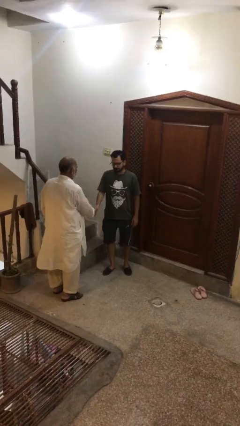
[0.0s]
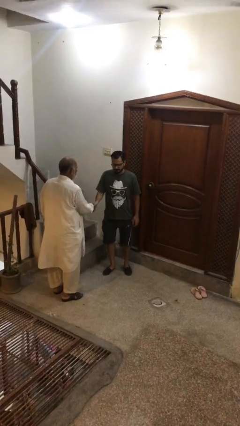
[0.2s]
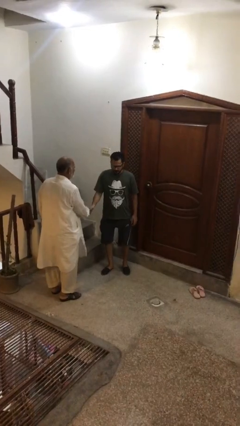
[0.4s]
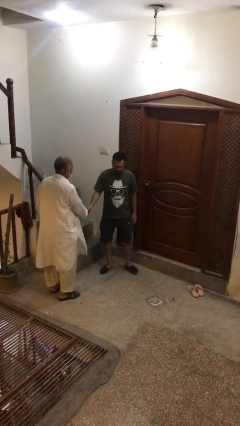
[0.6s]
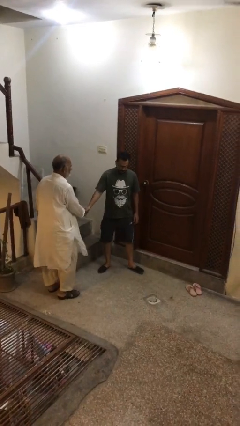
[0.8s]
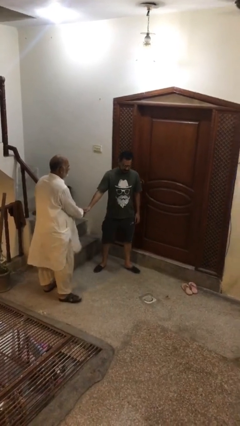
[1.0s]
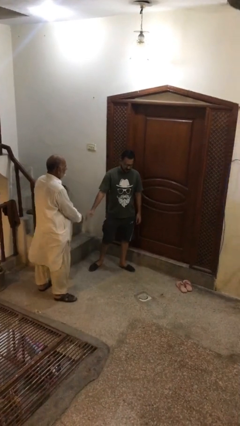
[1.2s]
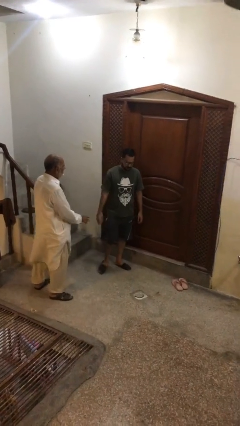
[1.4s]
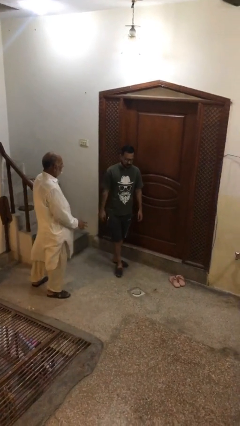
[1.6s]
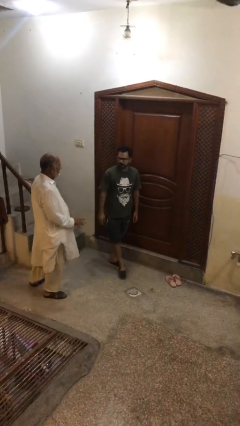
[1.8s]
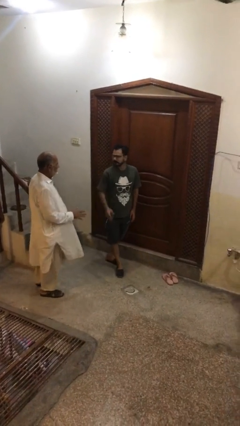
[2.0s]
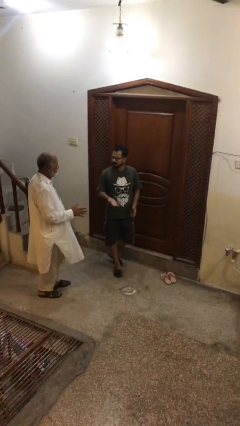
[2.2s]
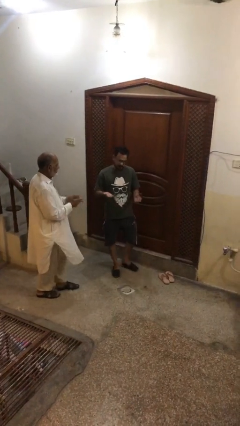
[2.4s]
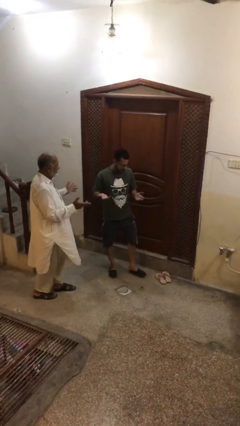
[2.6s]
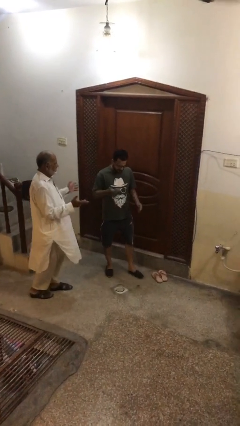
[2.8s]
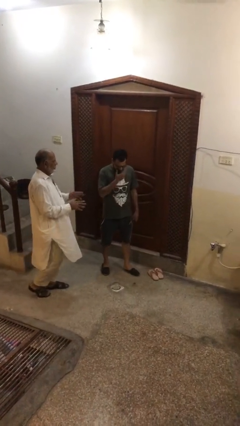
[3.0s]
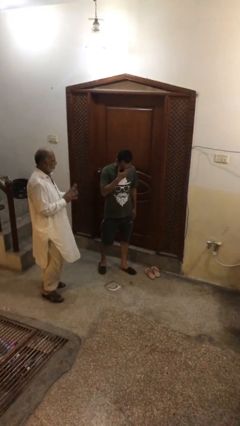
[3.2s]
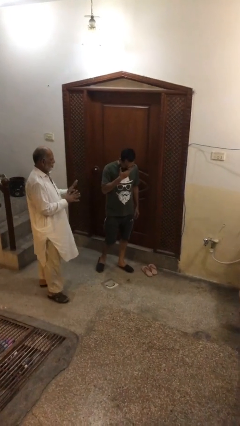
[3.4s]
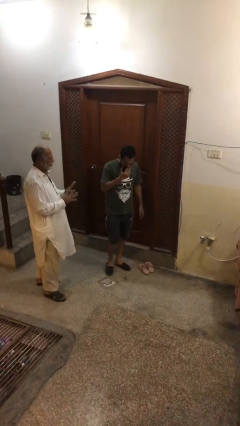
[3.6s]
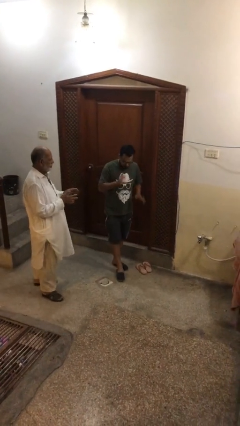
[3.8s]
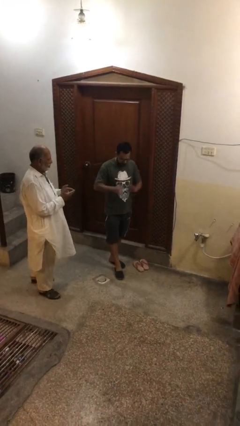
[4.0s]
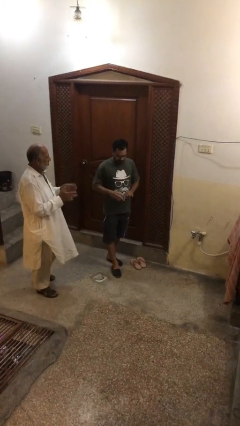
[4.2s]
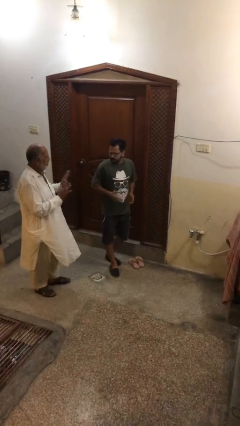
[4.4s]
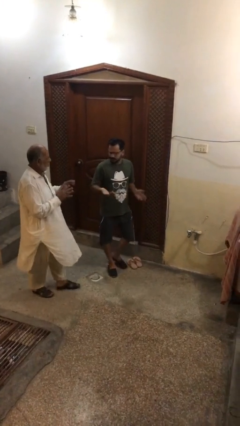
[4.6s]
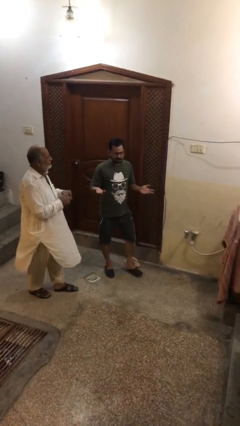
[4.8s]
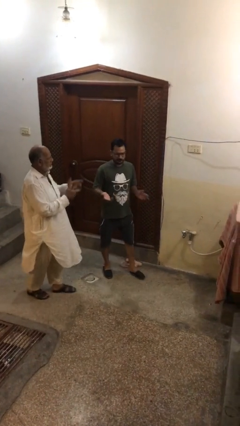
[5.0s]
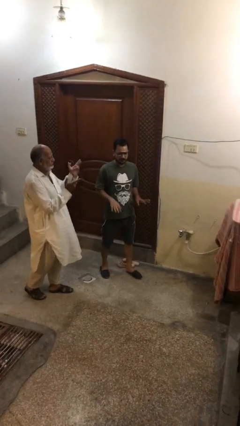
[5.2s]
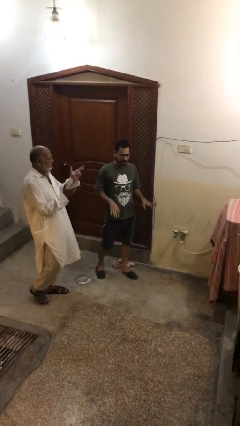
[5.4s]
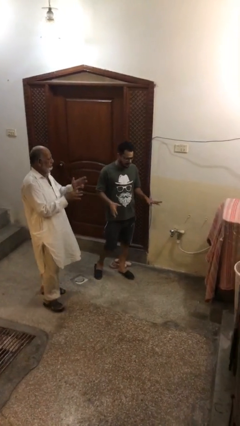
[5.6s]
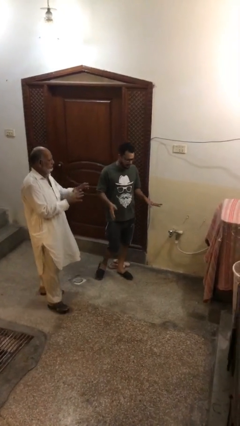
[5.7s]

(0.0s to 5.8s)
person talks to person

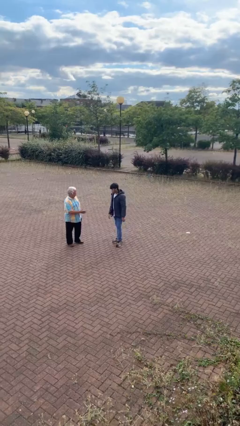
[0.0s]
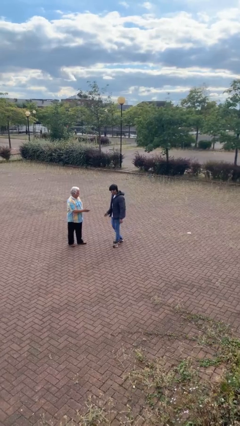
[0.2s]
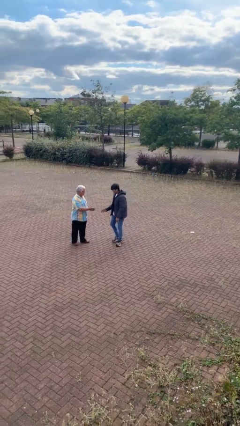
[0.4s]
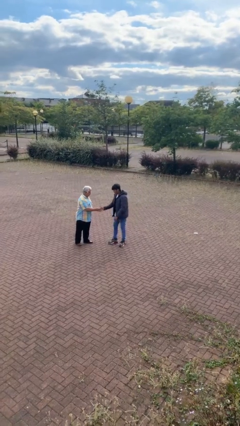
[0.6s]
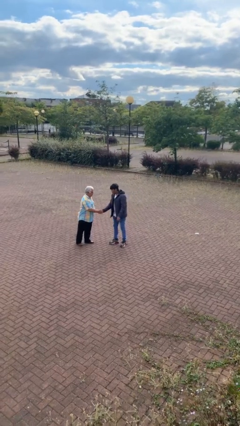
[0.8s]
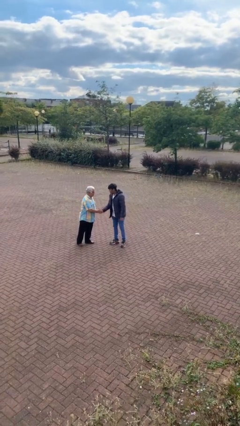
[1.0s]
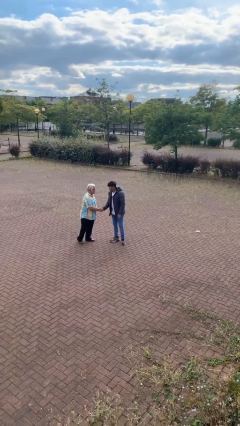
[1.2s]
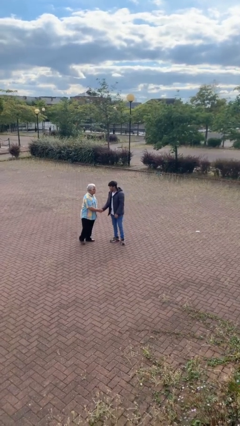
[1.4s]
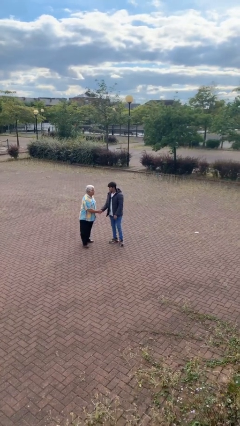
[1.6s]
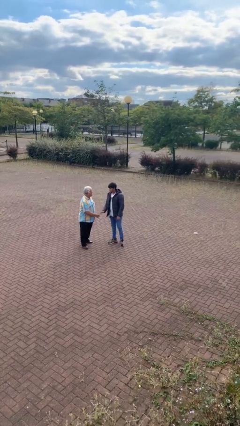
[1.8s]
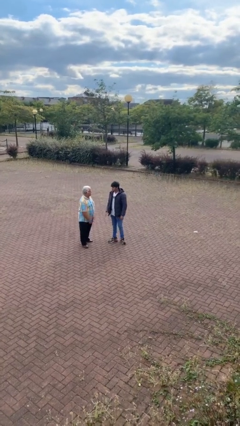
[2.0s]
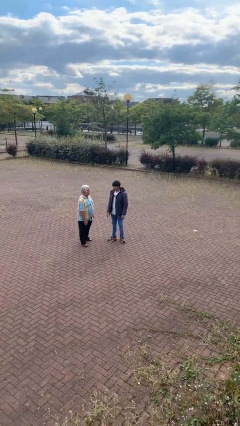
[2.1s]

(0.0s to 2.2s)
person shakes hand

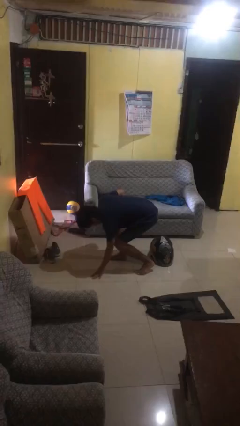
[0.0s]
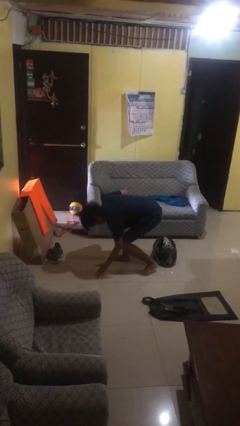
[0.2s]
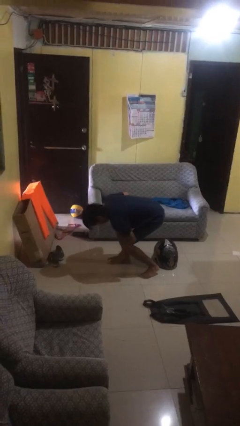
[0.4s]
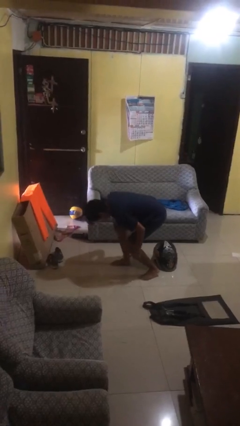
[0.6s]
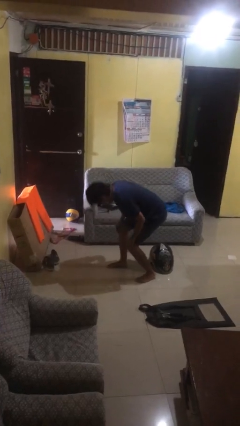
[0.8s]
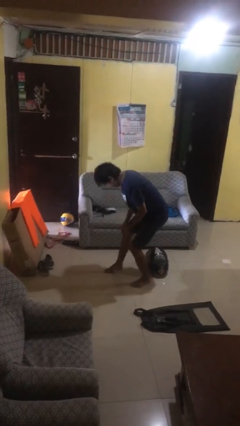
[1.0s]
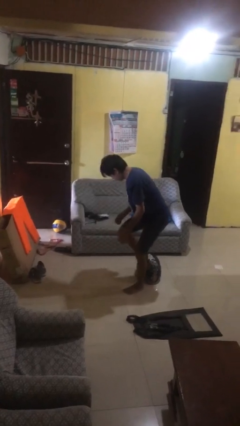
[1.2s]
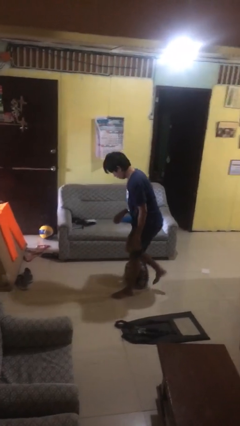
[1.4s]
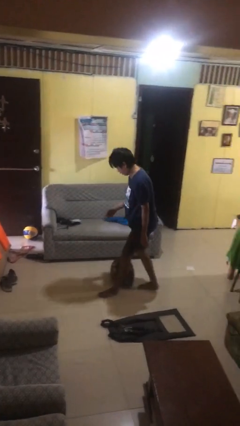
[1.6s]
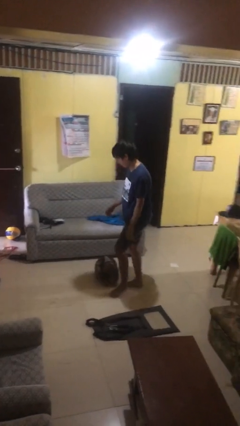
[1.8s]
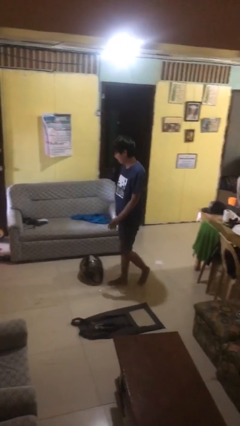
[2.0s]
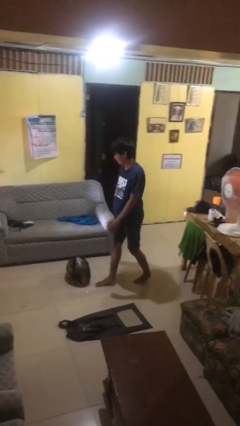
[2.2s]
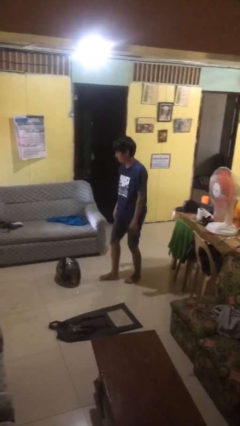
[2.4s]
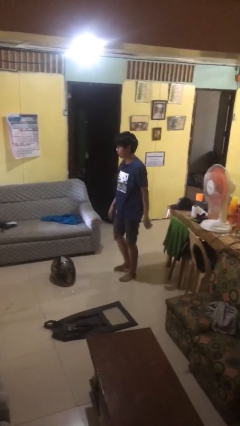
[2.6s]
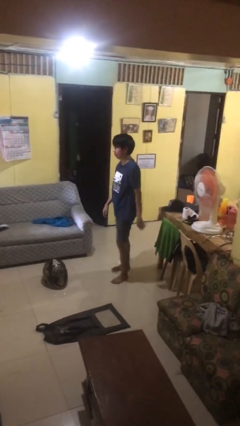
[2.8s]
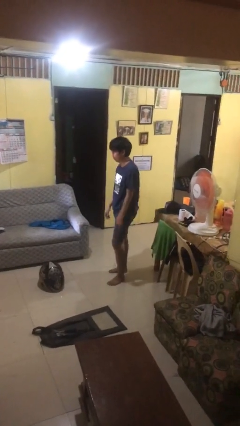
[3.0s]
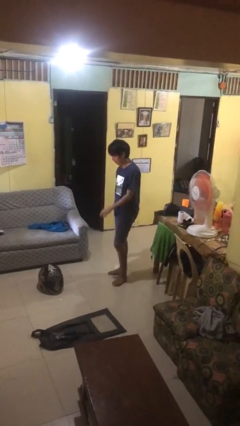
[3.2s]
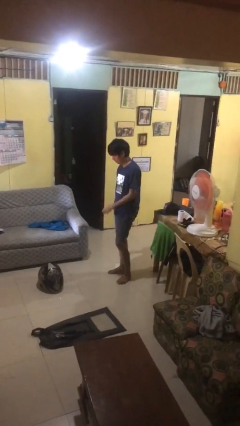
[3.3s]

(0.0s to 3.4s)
person stands up from floor

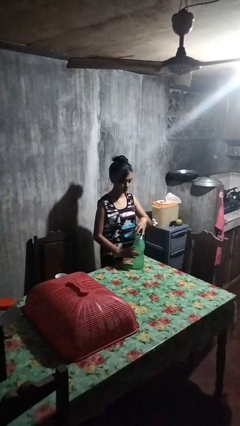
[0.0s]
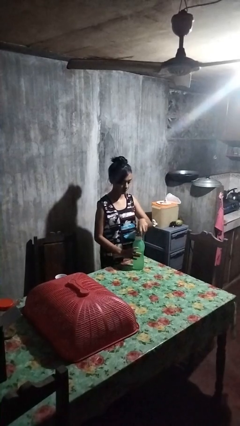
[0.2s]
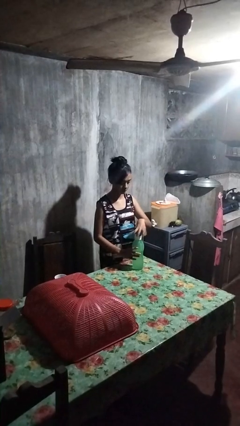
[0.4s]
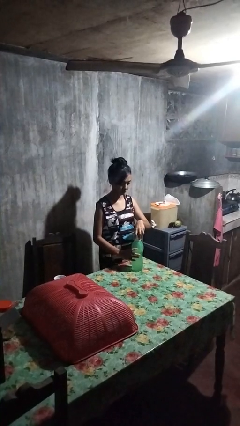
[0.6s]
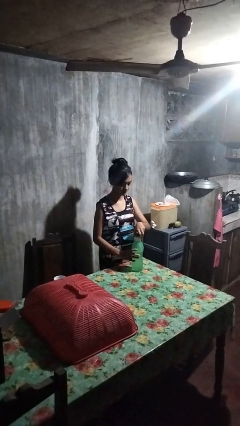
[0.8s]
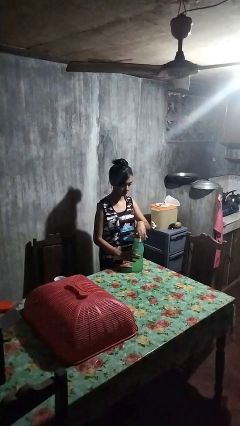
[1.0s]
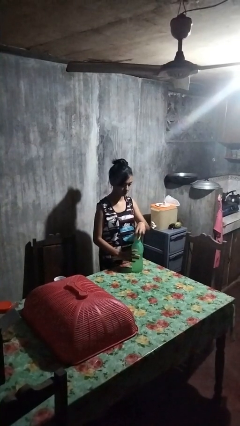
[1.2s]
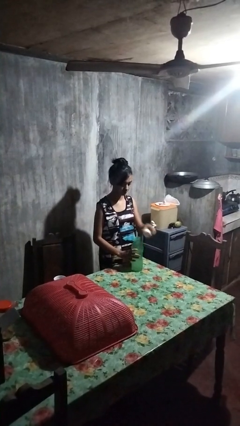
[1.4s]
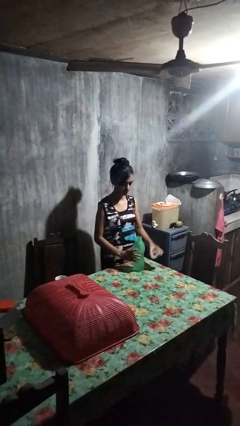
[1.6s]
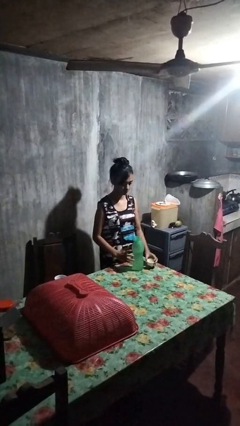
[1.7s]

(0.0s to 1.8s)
person unscrews lid from bottle

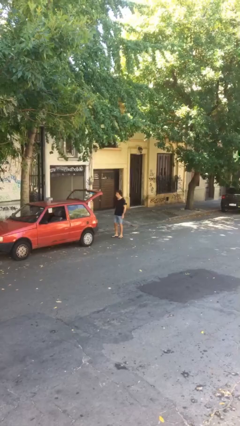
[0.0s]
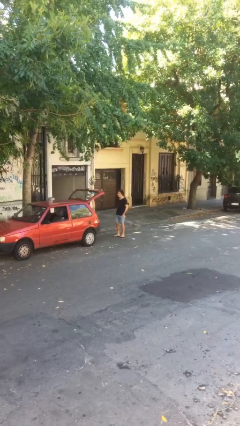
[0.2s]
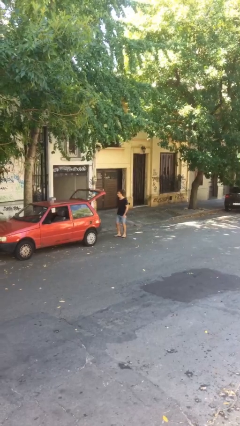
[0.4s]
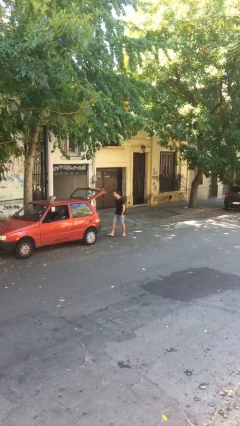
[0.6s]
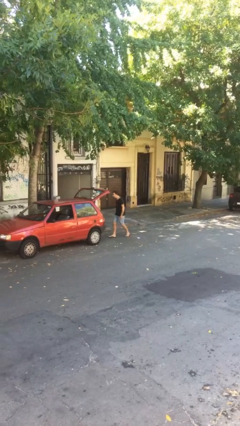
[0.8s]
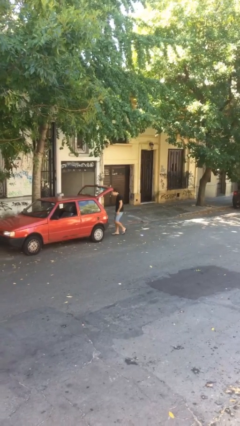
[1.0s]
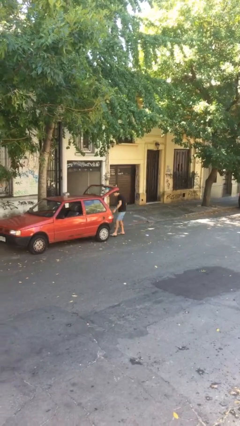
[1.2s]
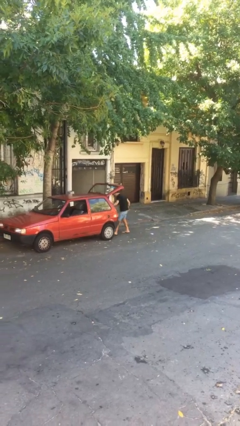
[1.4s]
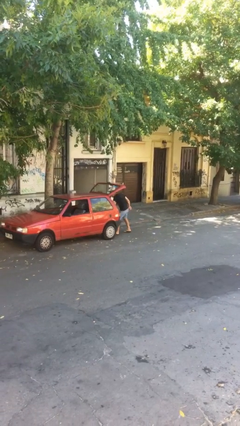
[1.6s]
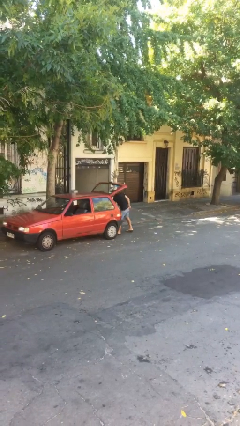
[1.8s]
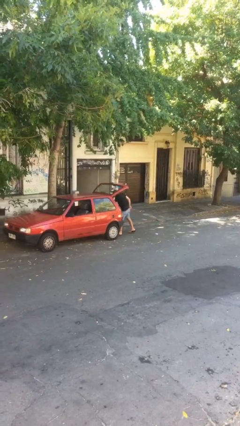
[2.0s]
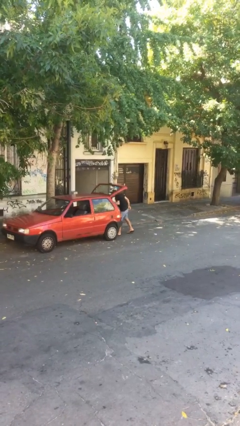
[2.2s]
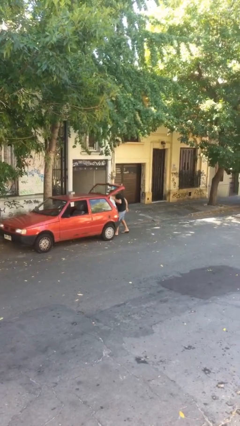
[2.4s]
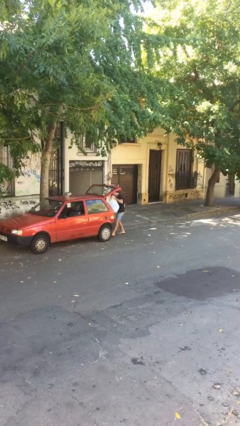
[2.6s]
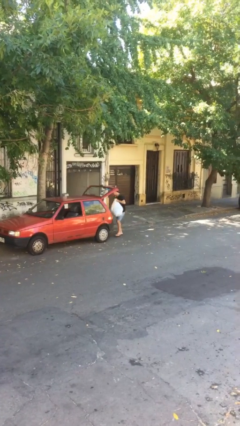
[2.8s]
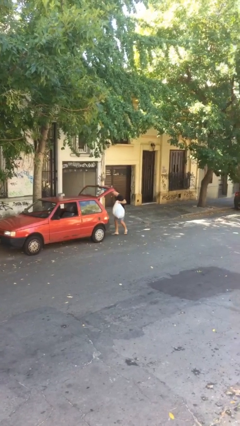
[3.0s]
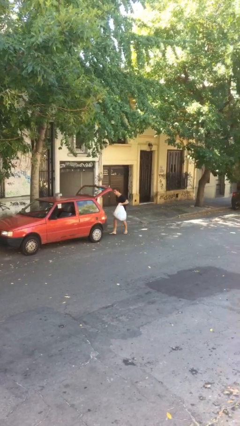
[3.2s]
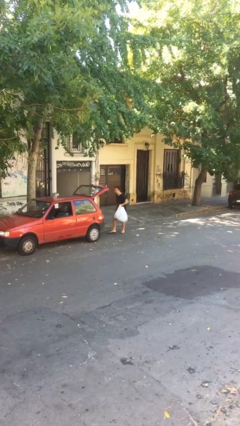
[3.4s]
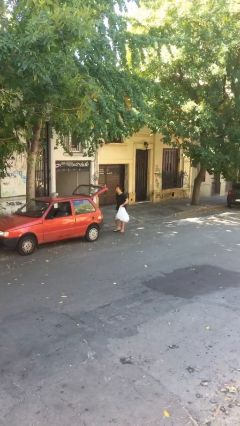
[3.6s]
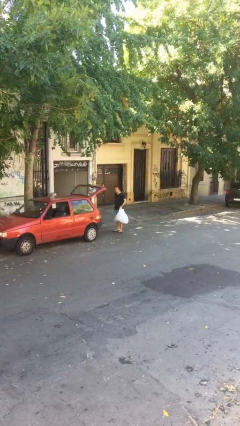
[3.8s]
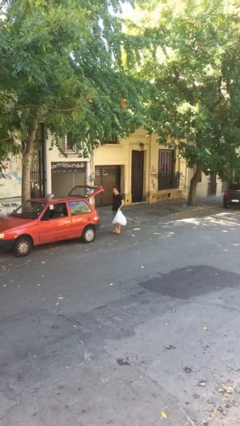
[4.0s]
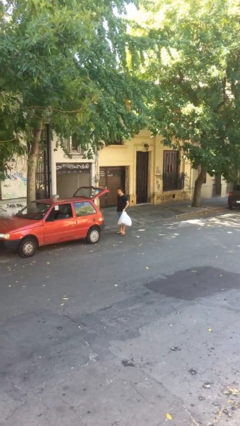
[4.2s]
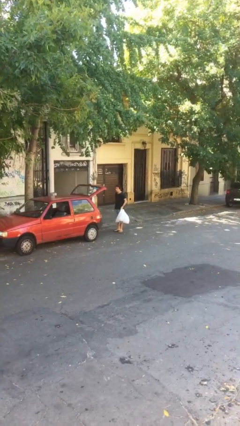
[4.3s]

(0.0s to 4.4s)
person unloads car
